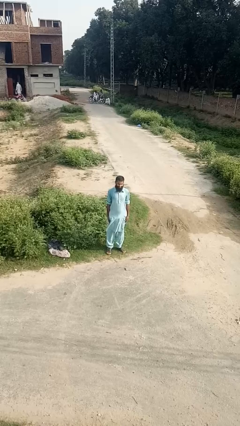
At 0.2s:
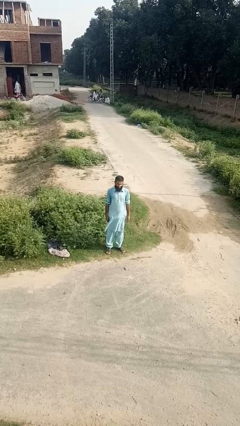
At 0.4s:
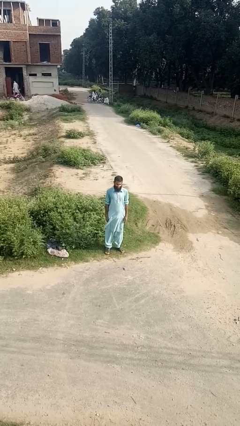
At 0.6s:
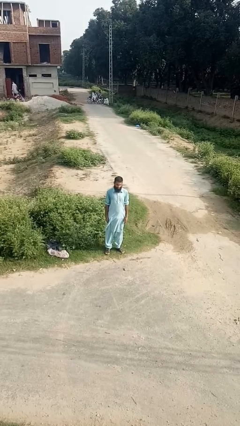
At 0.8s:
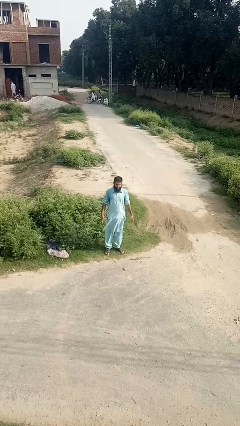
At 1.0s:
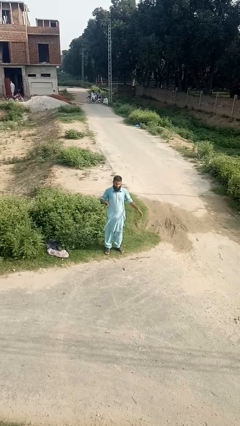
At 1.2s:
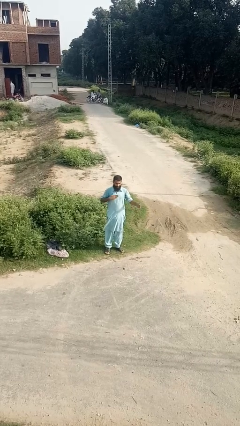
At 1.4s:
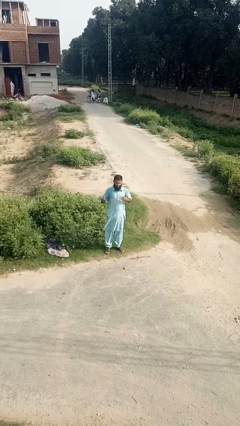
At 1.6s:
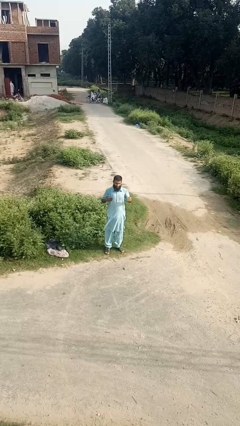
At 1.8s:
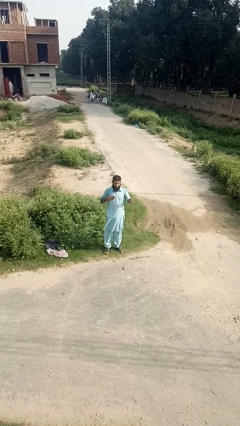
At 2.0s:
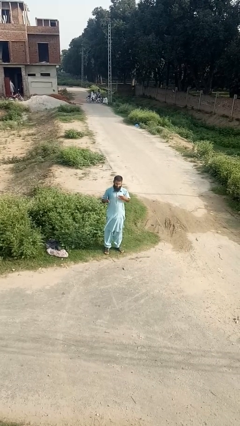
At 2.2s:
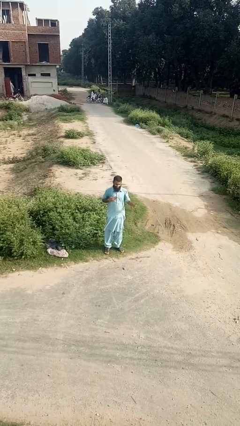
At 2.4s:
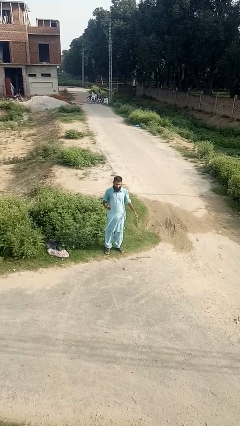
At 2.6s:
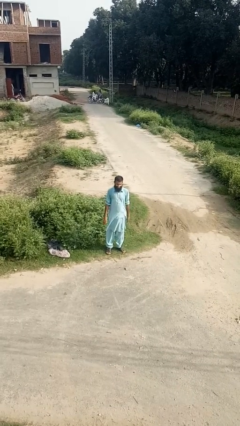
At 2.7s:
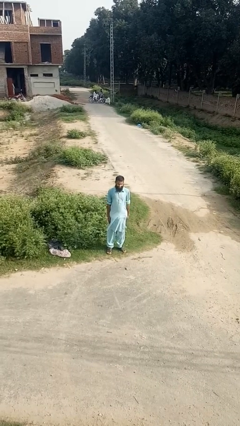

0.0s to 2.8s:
person drums on chest

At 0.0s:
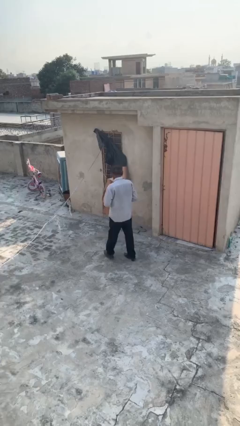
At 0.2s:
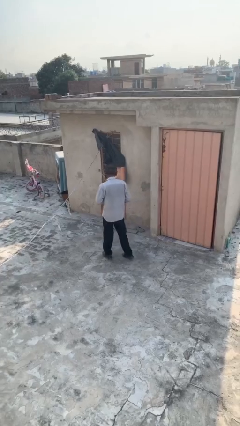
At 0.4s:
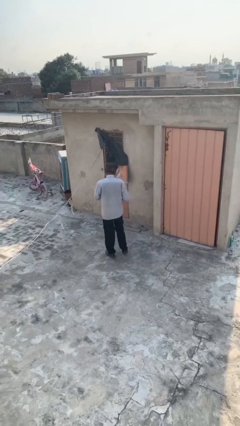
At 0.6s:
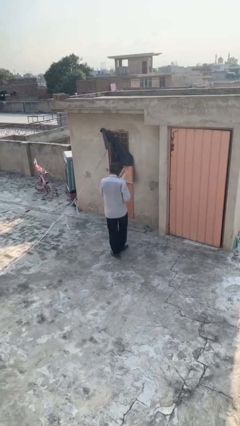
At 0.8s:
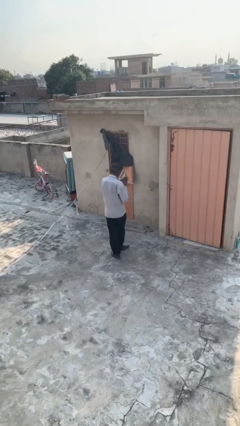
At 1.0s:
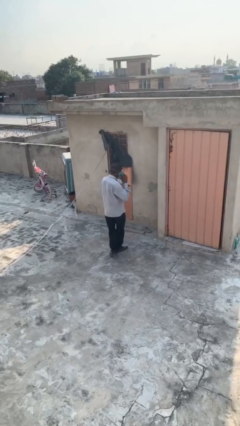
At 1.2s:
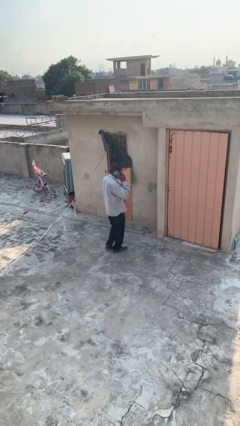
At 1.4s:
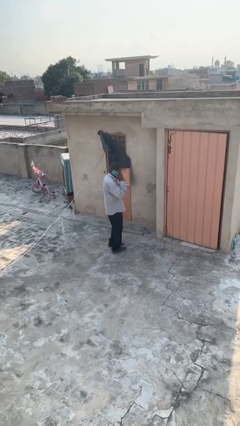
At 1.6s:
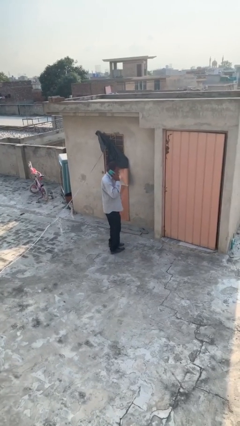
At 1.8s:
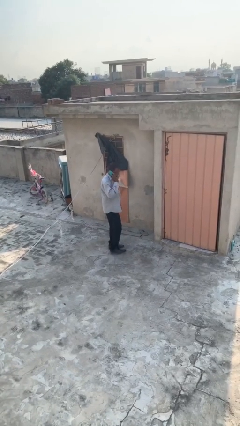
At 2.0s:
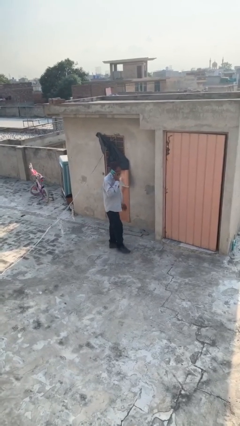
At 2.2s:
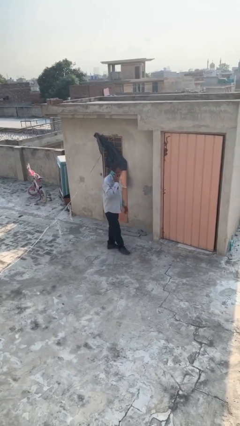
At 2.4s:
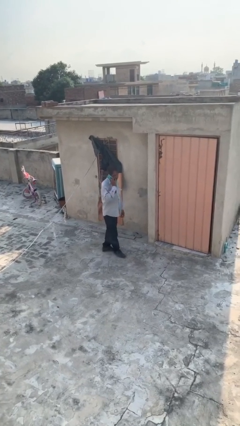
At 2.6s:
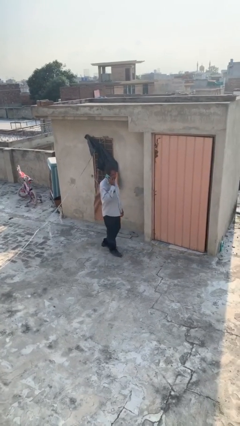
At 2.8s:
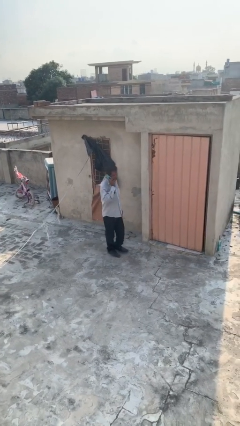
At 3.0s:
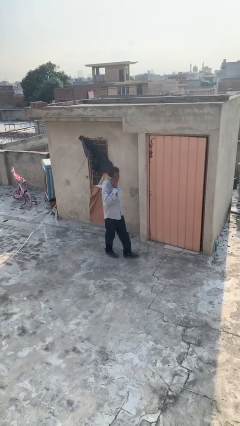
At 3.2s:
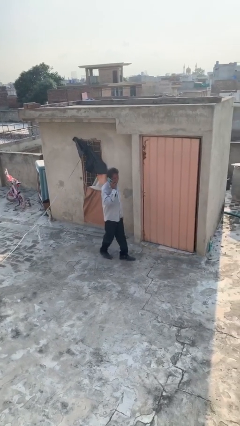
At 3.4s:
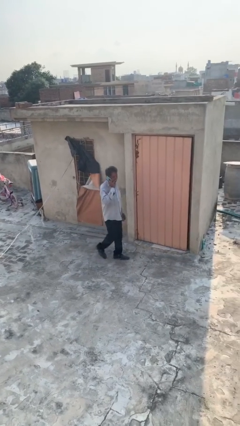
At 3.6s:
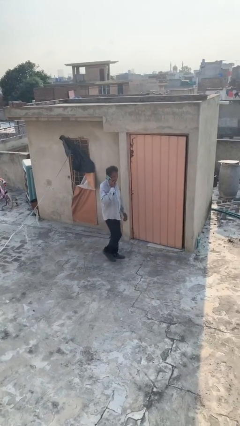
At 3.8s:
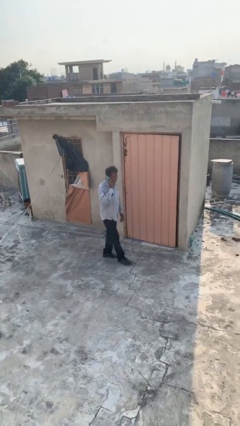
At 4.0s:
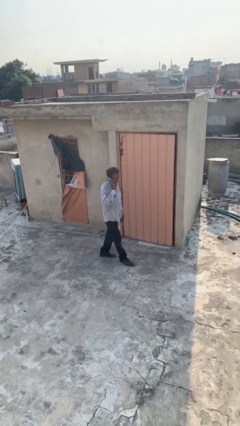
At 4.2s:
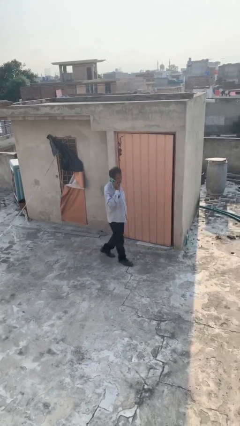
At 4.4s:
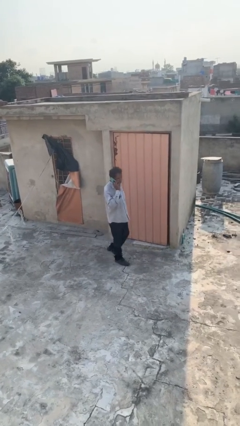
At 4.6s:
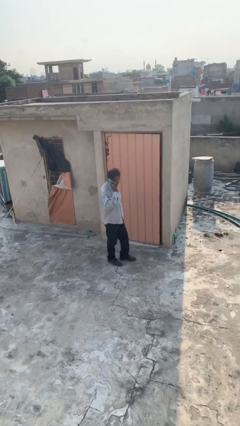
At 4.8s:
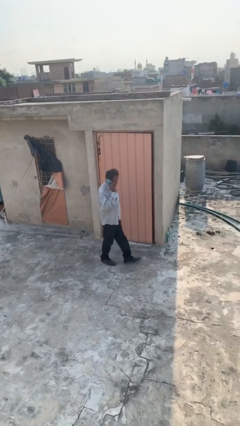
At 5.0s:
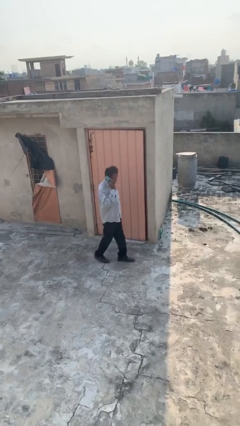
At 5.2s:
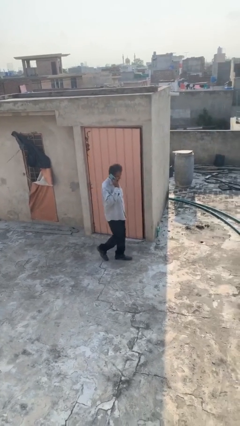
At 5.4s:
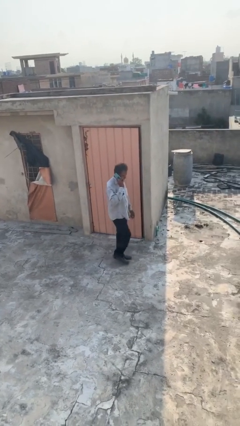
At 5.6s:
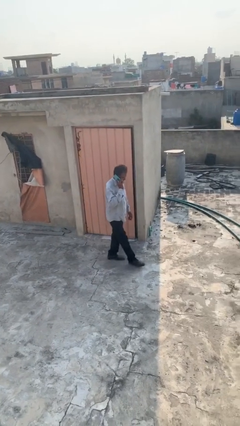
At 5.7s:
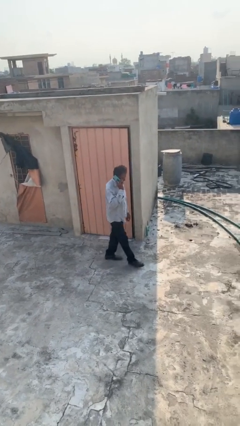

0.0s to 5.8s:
person talks on phone

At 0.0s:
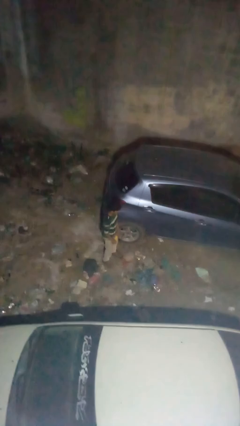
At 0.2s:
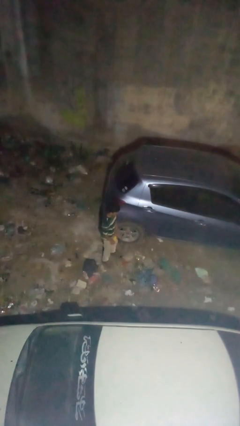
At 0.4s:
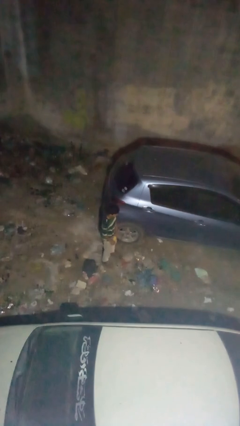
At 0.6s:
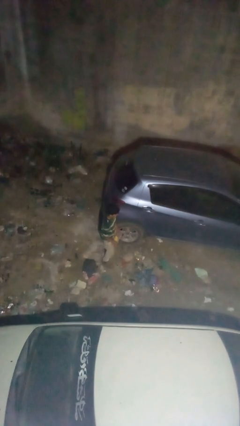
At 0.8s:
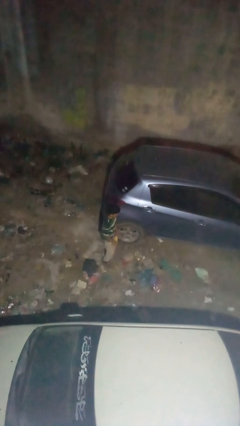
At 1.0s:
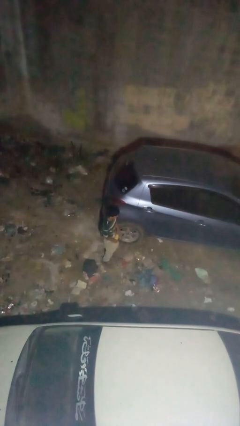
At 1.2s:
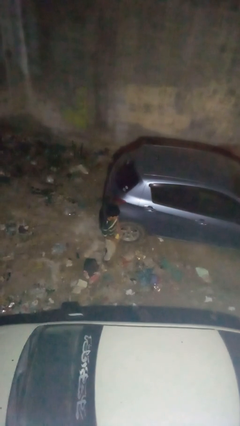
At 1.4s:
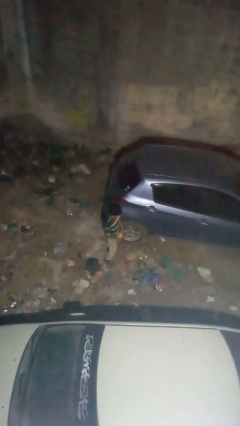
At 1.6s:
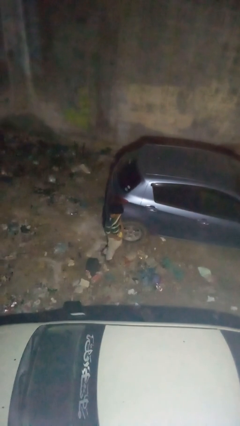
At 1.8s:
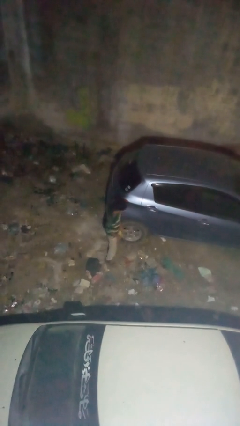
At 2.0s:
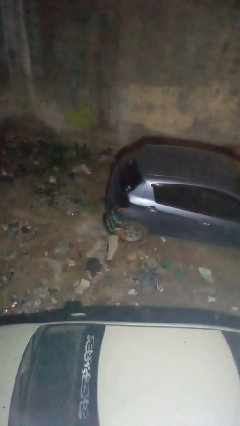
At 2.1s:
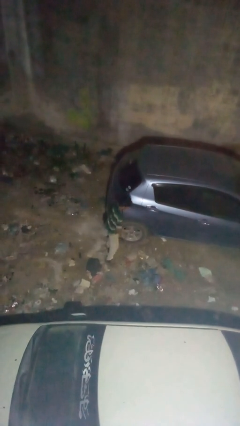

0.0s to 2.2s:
person kicks car tires

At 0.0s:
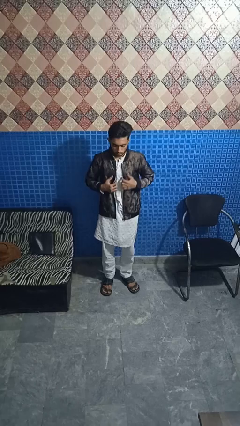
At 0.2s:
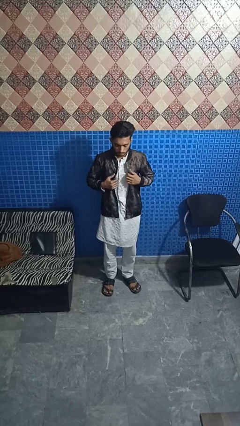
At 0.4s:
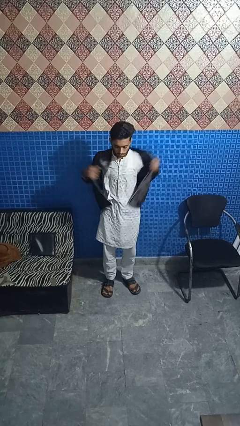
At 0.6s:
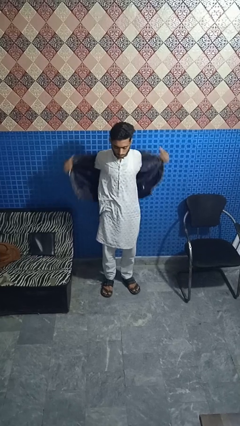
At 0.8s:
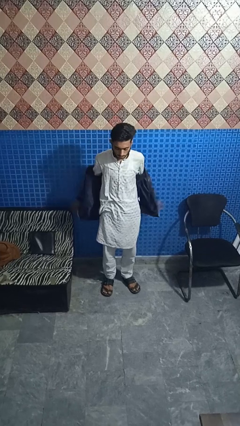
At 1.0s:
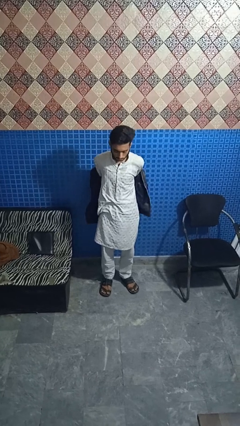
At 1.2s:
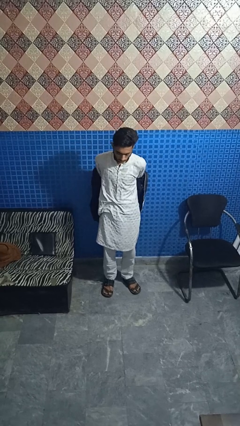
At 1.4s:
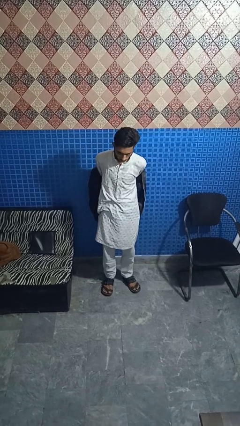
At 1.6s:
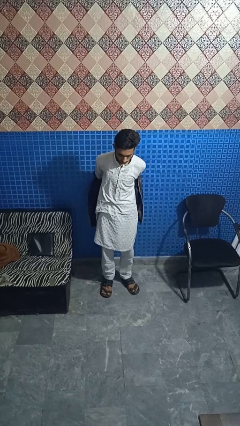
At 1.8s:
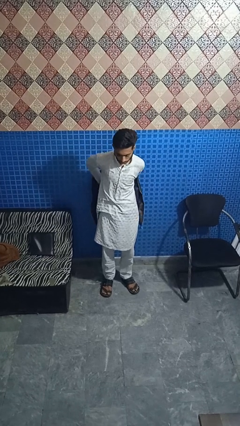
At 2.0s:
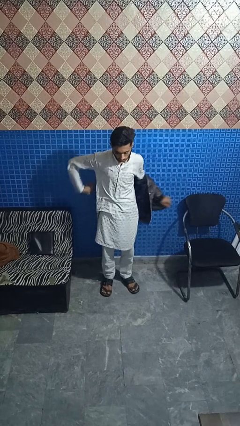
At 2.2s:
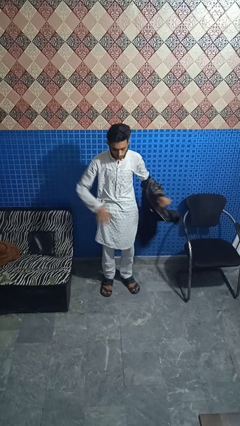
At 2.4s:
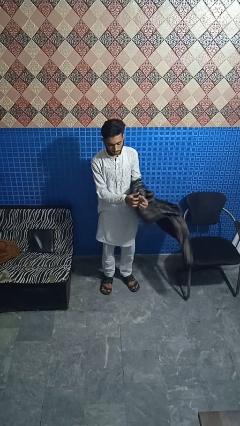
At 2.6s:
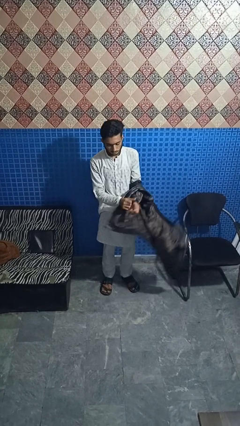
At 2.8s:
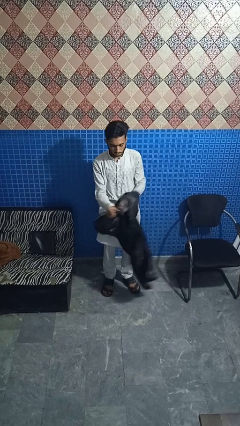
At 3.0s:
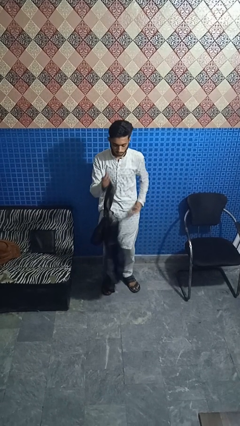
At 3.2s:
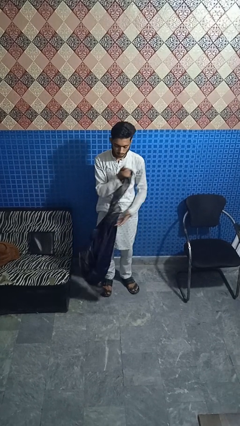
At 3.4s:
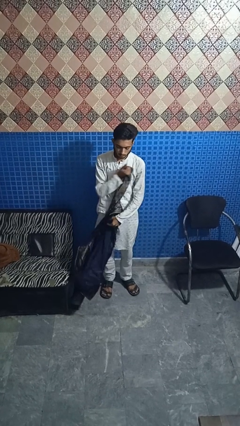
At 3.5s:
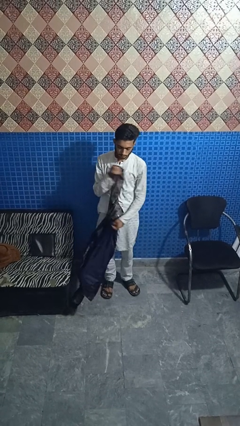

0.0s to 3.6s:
person takes off jacket

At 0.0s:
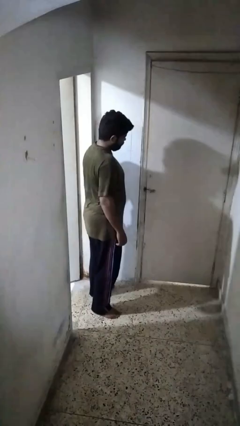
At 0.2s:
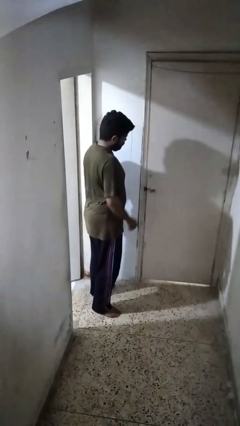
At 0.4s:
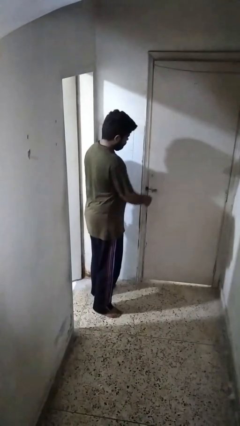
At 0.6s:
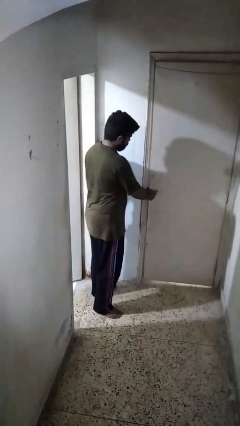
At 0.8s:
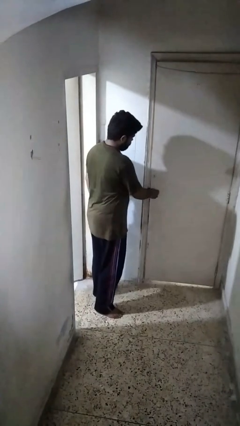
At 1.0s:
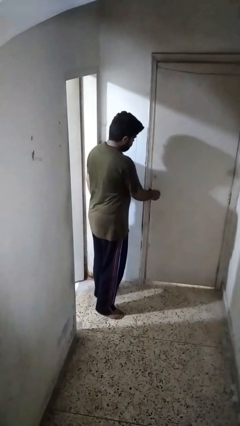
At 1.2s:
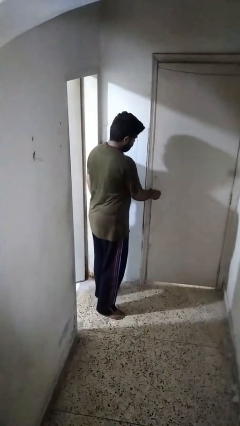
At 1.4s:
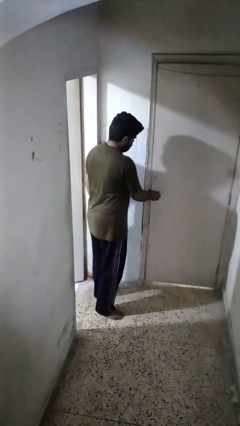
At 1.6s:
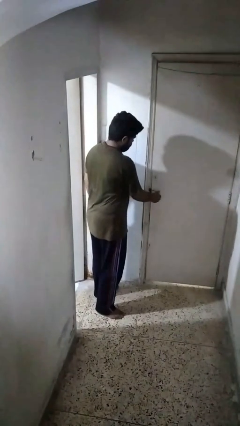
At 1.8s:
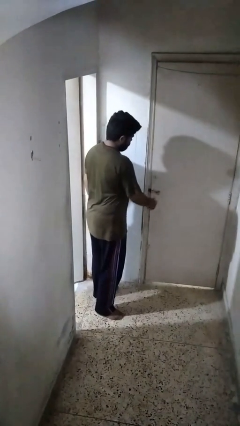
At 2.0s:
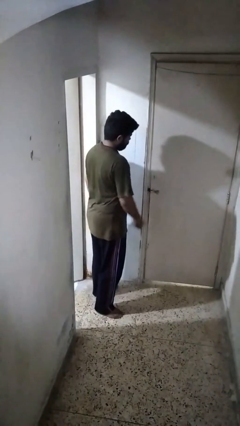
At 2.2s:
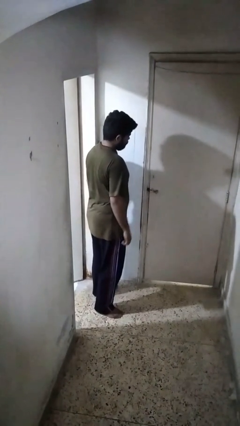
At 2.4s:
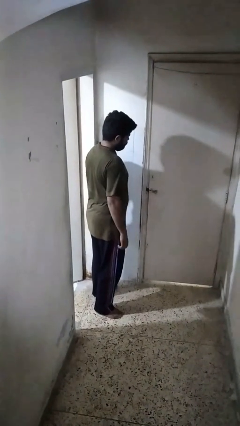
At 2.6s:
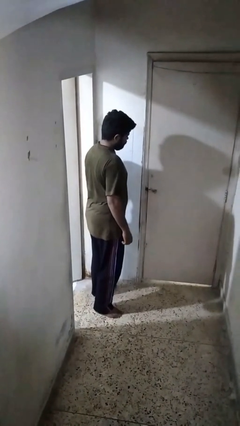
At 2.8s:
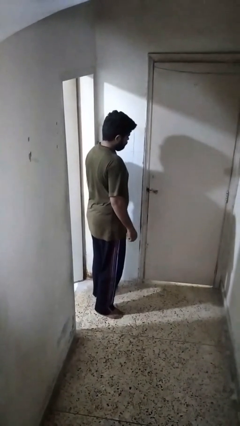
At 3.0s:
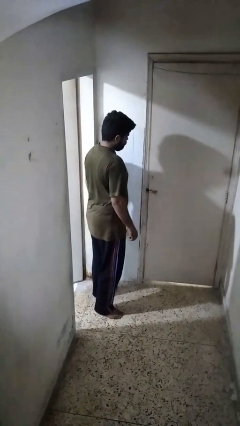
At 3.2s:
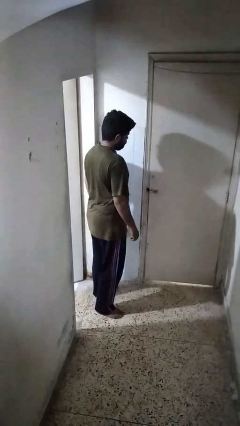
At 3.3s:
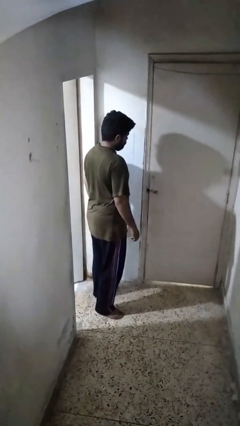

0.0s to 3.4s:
person unlocks door with keys
